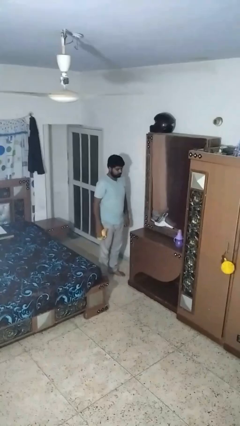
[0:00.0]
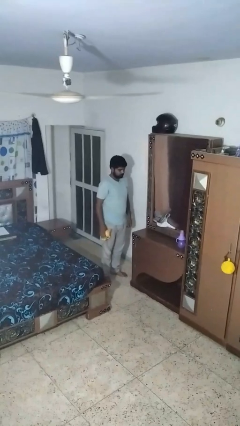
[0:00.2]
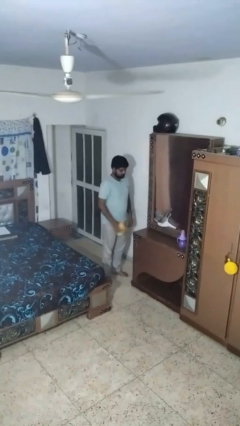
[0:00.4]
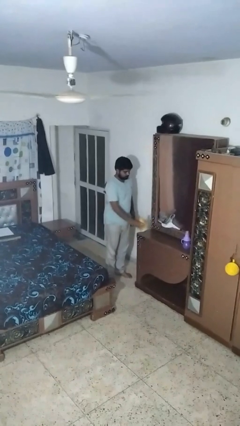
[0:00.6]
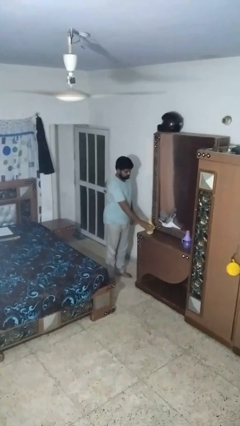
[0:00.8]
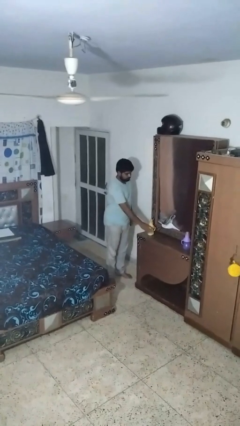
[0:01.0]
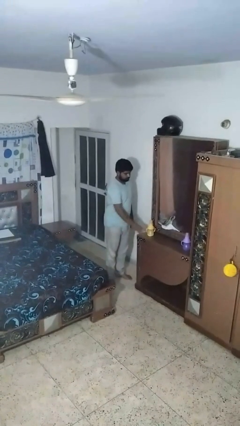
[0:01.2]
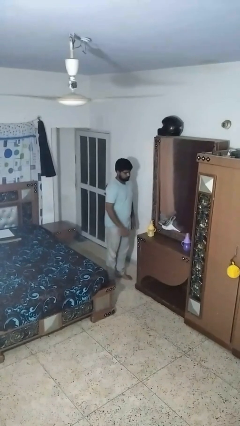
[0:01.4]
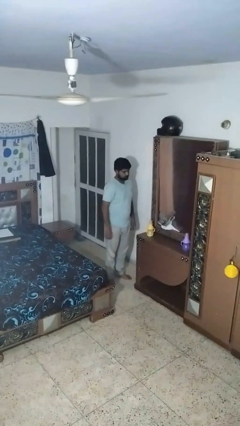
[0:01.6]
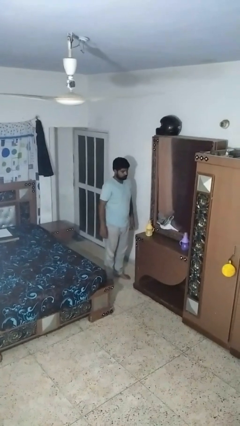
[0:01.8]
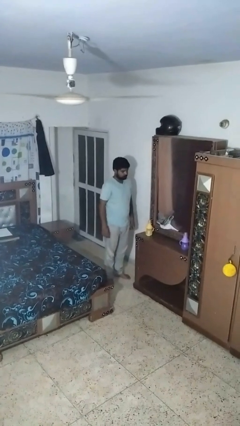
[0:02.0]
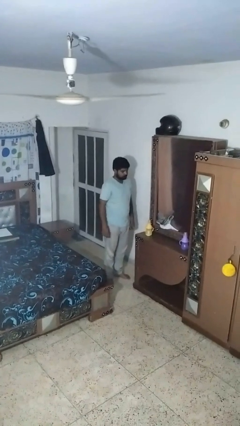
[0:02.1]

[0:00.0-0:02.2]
person puts down object on countertop

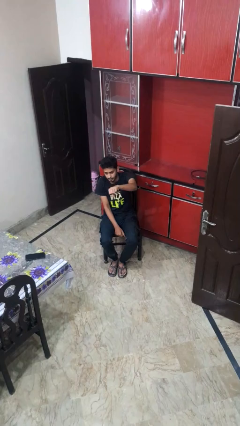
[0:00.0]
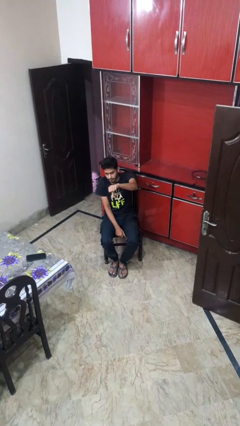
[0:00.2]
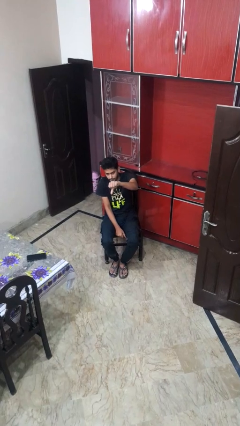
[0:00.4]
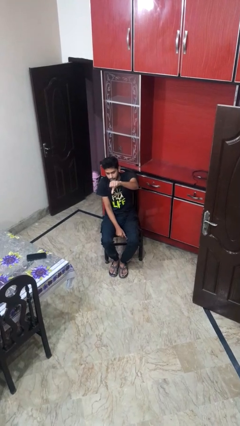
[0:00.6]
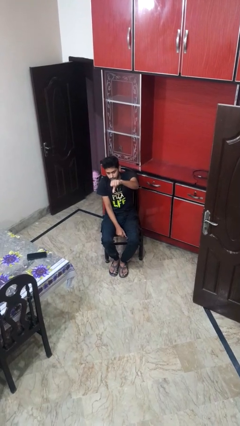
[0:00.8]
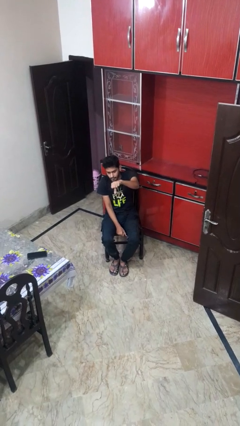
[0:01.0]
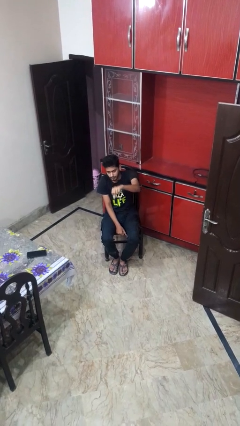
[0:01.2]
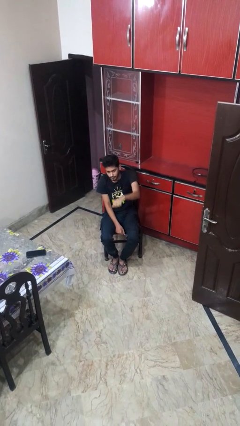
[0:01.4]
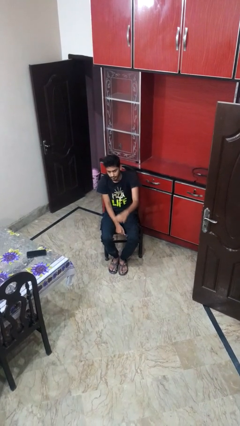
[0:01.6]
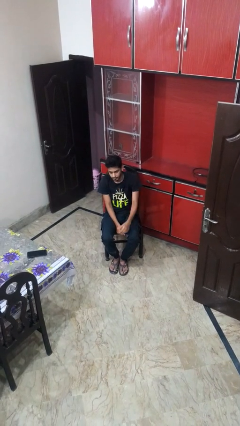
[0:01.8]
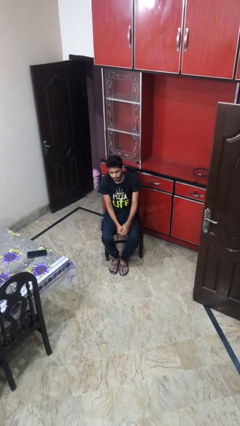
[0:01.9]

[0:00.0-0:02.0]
person gestures thumbs down

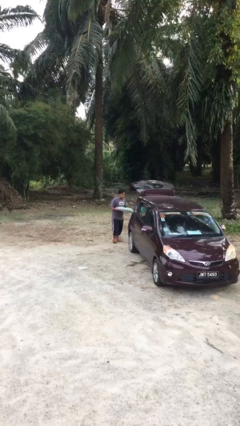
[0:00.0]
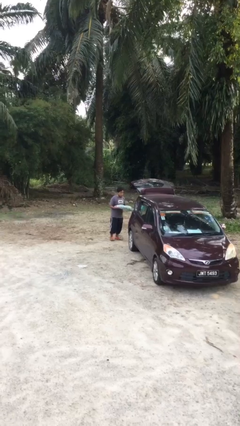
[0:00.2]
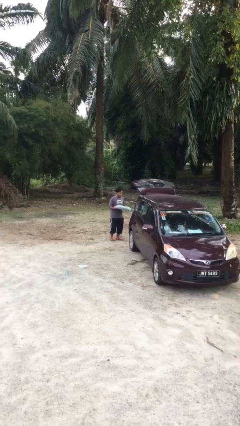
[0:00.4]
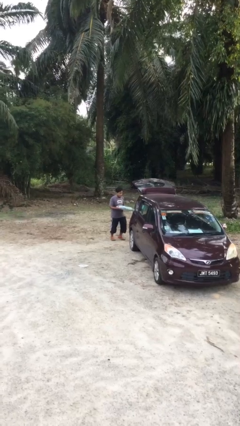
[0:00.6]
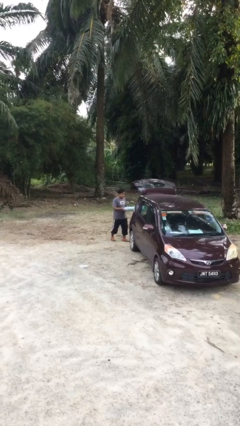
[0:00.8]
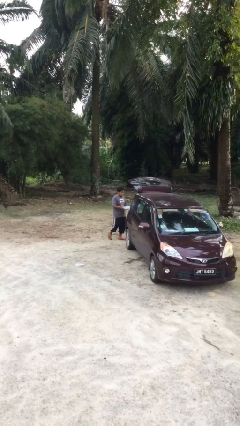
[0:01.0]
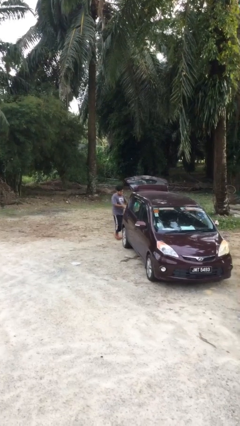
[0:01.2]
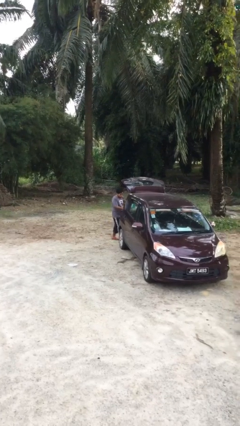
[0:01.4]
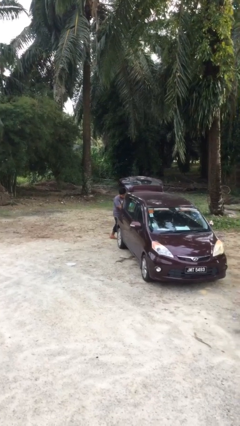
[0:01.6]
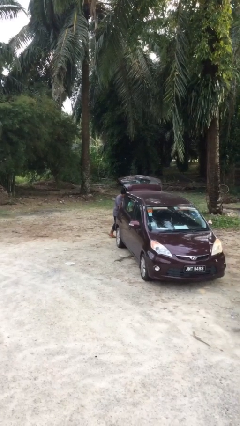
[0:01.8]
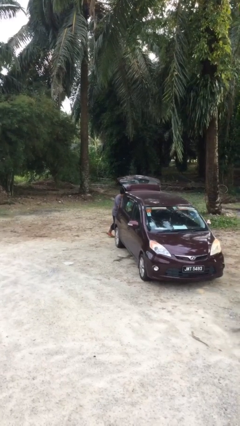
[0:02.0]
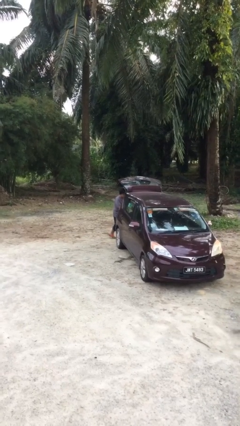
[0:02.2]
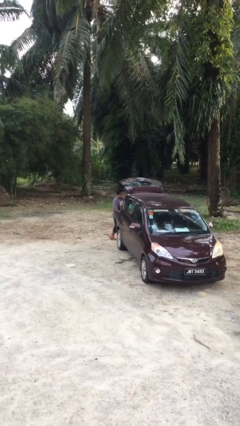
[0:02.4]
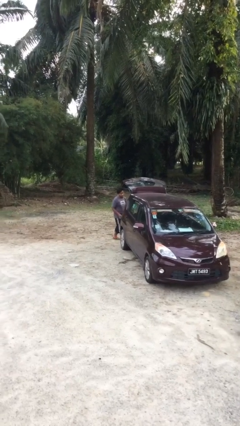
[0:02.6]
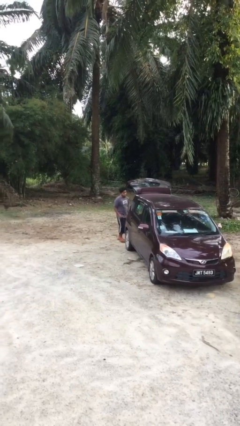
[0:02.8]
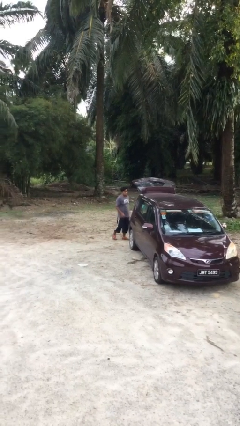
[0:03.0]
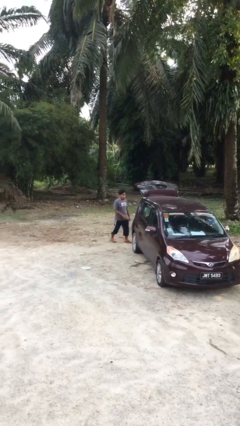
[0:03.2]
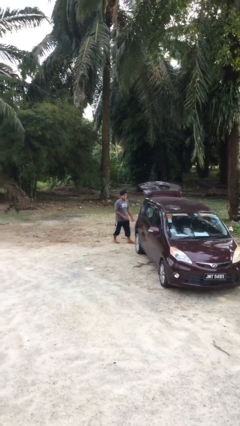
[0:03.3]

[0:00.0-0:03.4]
person loads car

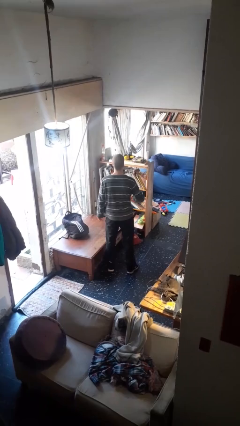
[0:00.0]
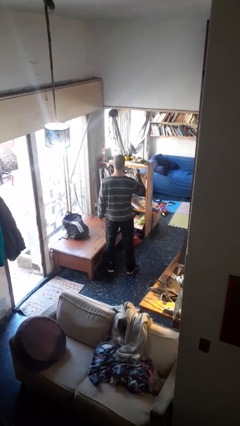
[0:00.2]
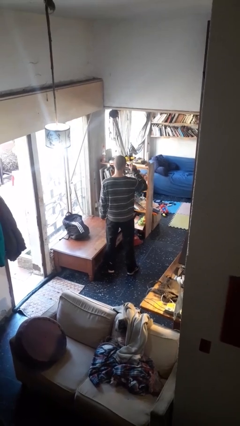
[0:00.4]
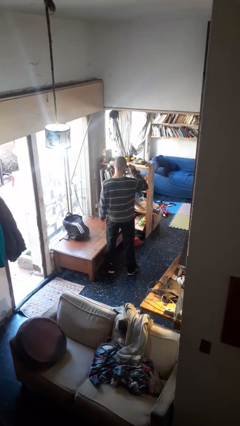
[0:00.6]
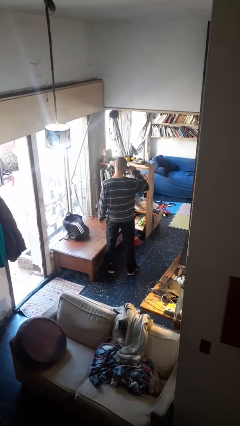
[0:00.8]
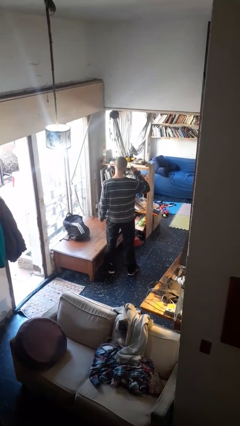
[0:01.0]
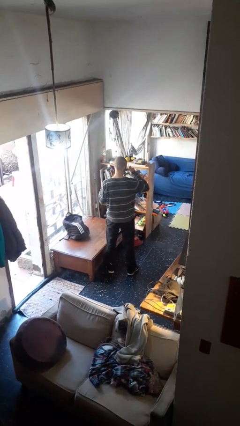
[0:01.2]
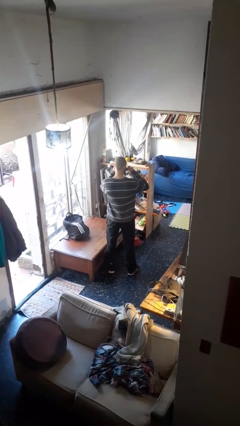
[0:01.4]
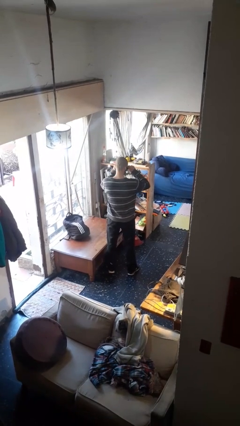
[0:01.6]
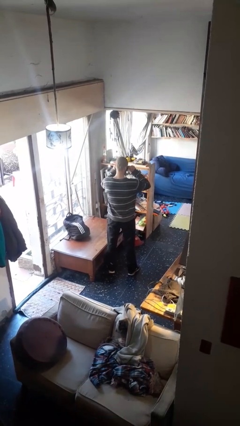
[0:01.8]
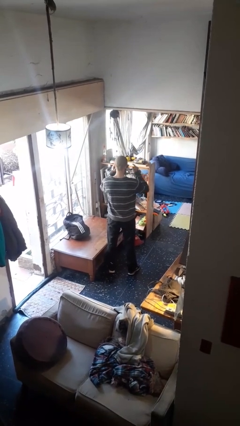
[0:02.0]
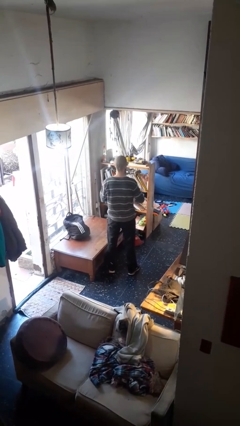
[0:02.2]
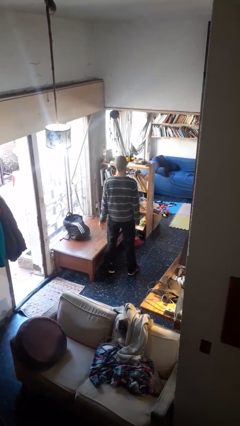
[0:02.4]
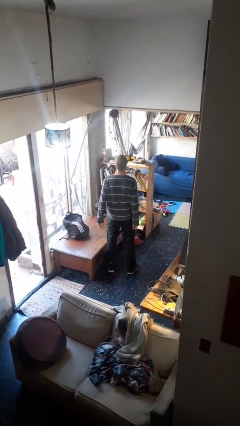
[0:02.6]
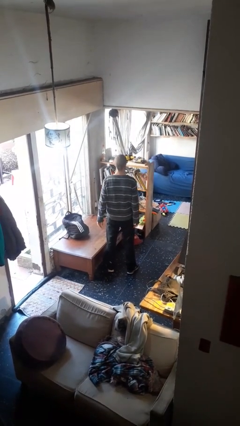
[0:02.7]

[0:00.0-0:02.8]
person puts on sunglasses

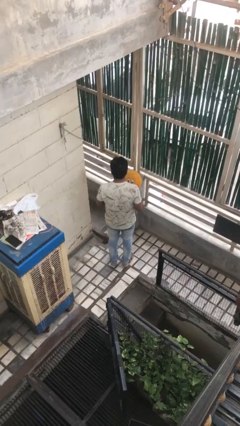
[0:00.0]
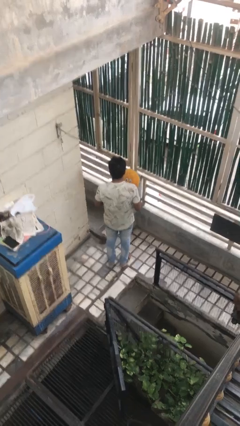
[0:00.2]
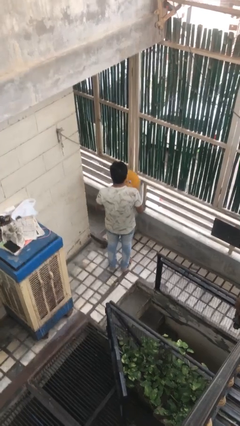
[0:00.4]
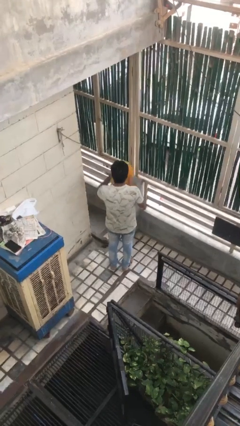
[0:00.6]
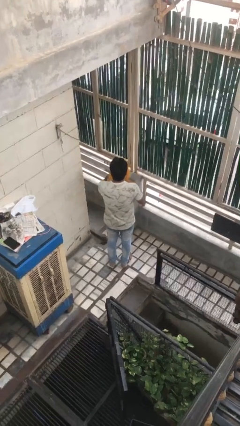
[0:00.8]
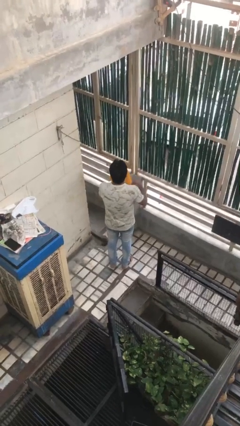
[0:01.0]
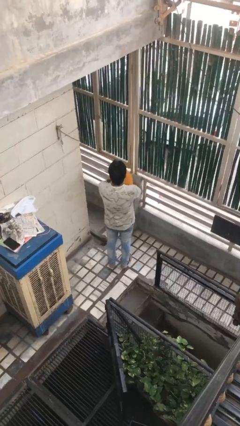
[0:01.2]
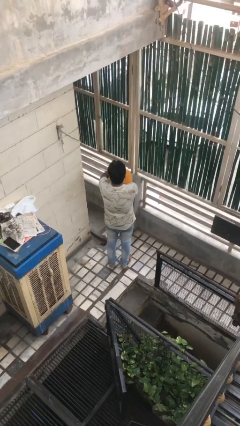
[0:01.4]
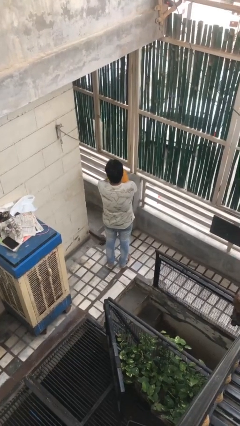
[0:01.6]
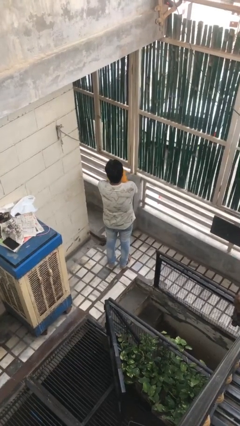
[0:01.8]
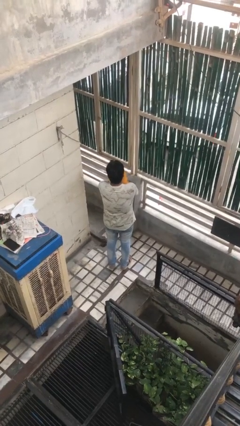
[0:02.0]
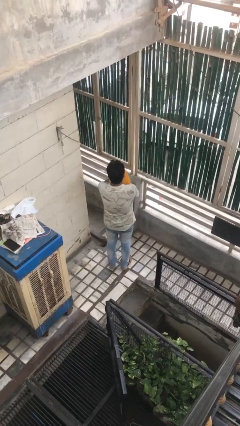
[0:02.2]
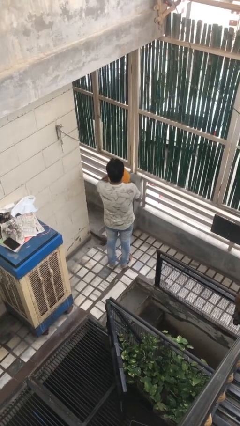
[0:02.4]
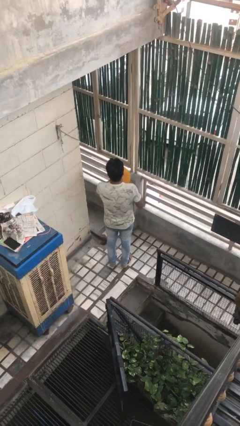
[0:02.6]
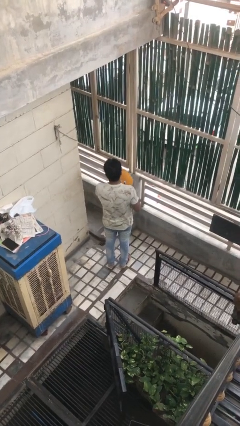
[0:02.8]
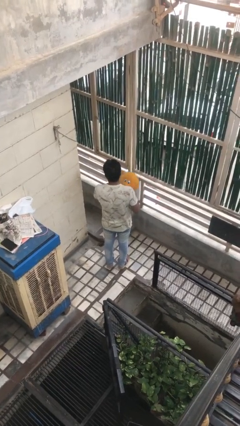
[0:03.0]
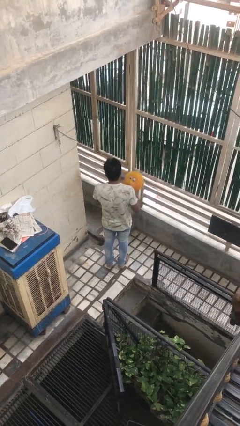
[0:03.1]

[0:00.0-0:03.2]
person hugs stuffed animal

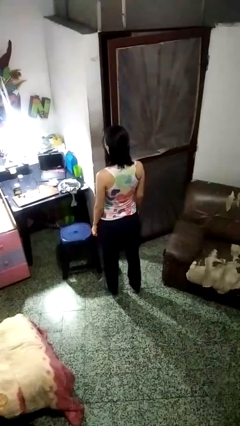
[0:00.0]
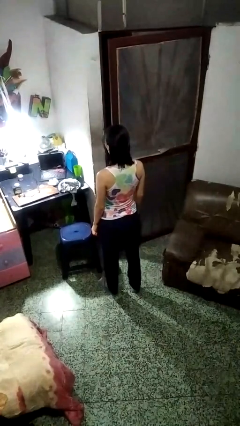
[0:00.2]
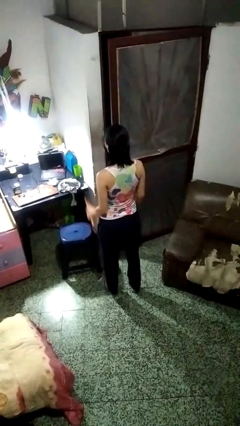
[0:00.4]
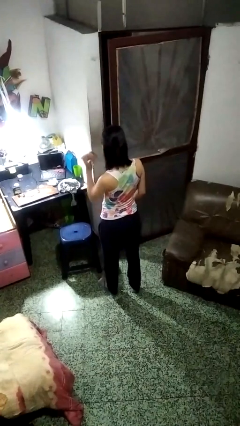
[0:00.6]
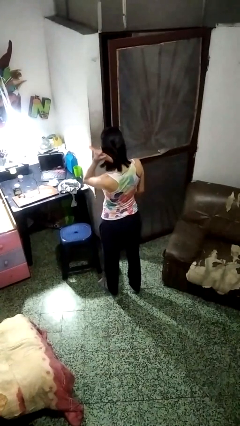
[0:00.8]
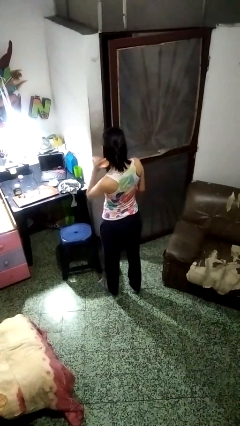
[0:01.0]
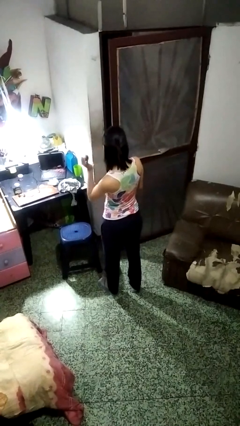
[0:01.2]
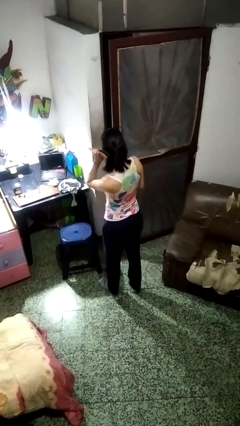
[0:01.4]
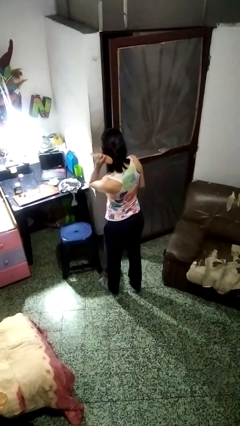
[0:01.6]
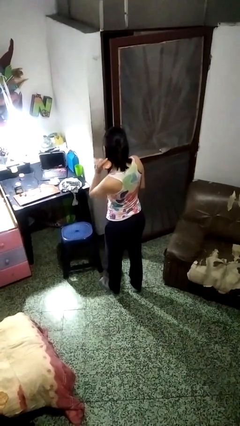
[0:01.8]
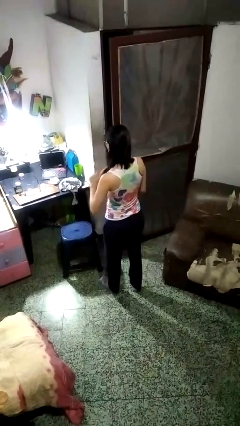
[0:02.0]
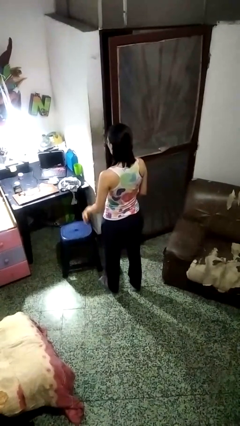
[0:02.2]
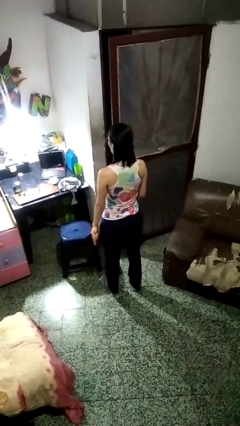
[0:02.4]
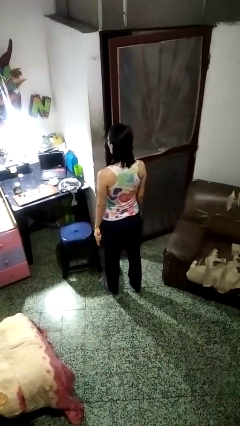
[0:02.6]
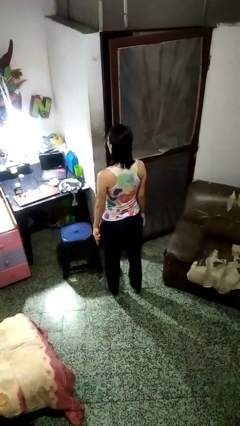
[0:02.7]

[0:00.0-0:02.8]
person brushes hair

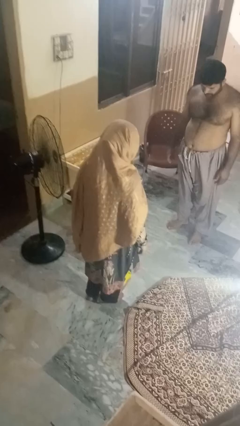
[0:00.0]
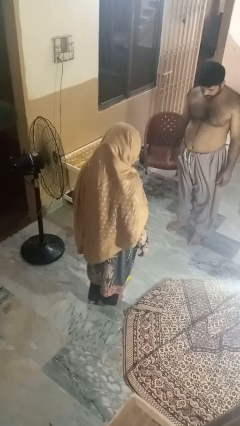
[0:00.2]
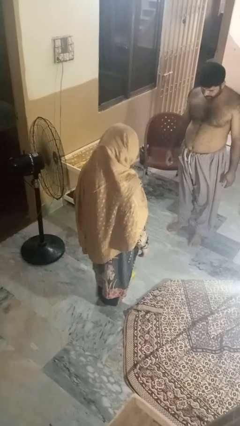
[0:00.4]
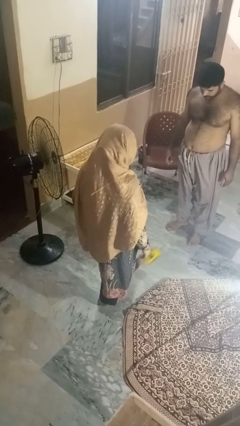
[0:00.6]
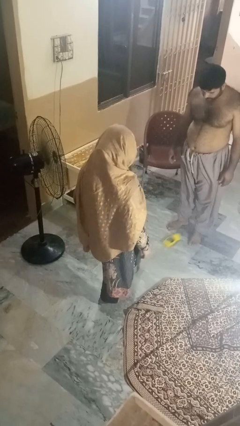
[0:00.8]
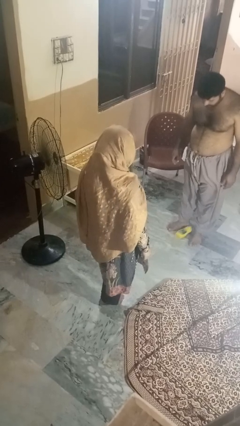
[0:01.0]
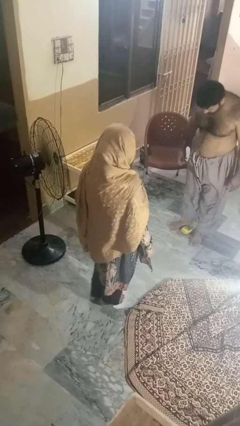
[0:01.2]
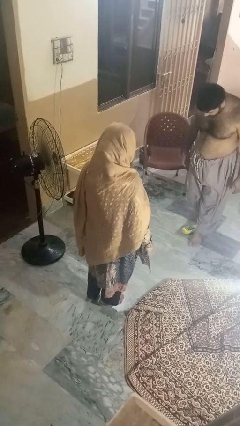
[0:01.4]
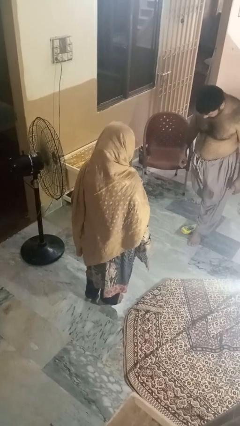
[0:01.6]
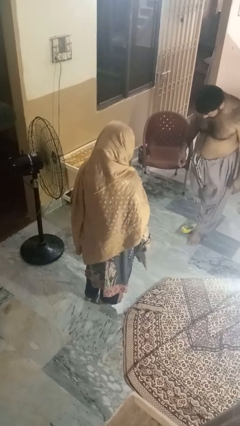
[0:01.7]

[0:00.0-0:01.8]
person kicks object to person
